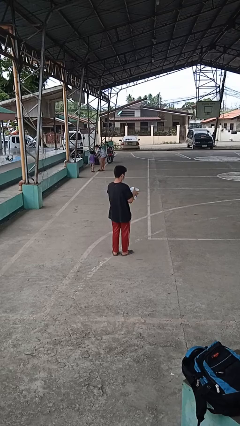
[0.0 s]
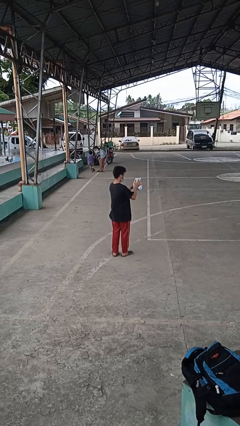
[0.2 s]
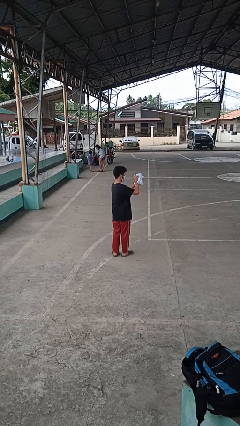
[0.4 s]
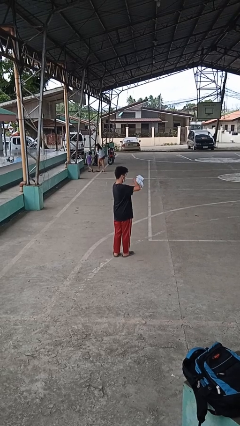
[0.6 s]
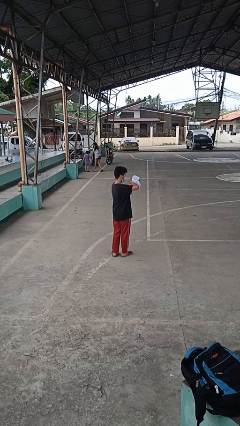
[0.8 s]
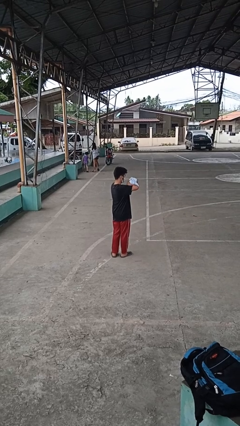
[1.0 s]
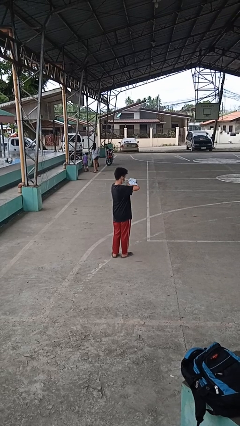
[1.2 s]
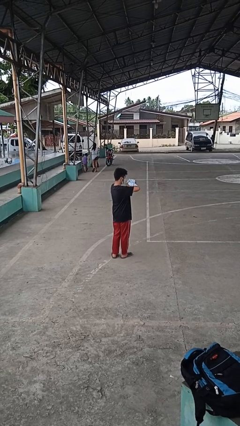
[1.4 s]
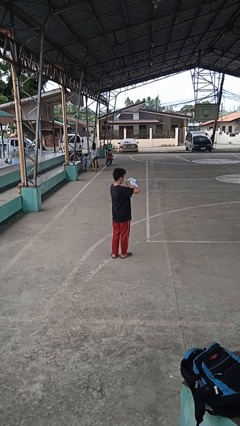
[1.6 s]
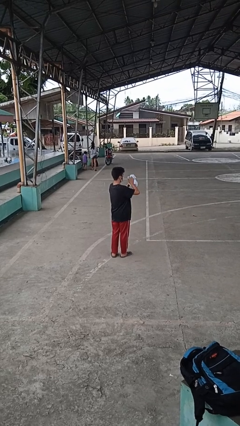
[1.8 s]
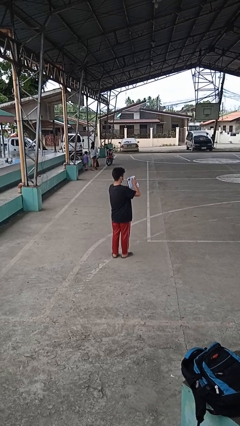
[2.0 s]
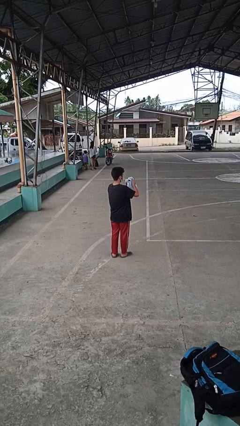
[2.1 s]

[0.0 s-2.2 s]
person squeezes object

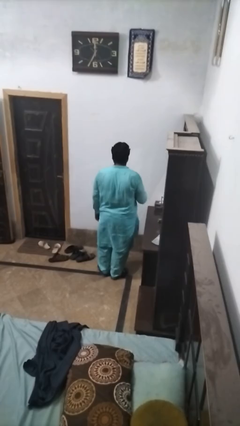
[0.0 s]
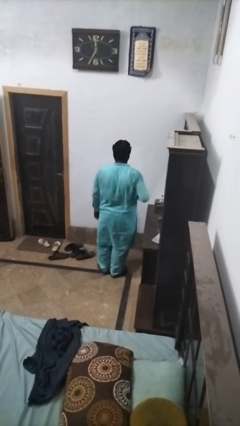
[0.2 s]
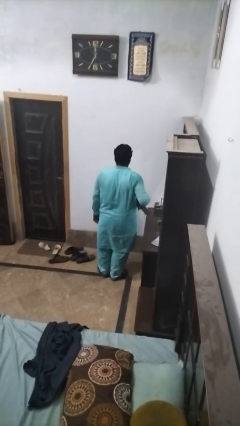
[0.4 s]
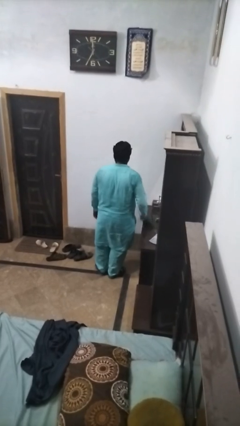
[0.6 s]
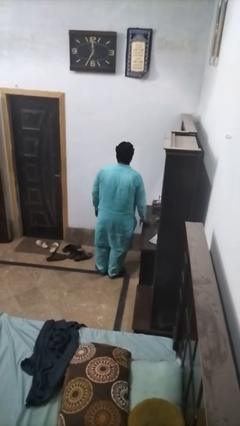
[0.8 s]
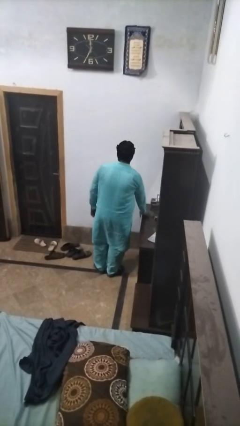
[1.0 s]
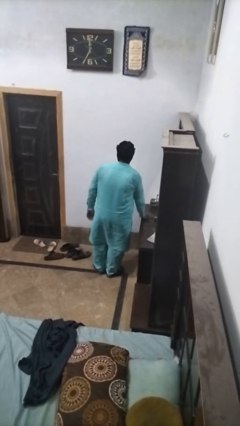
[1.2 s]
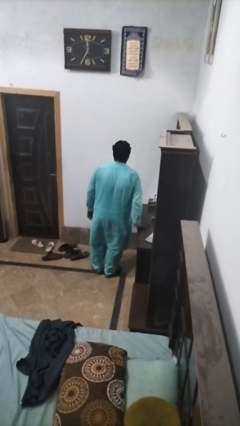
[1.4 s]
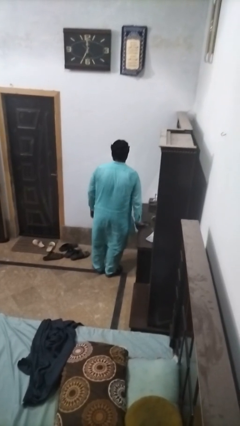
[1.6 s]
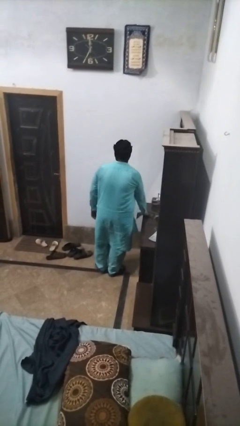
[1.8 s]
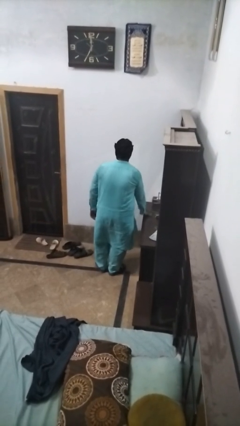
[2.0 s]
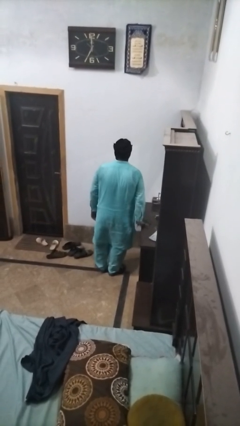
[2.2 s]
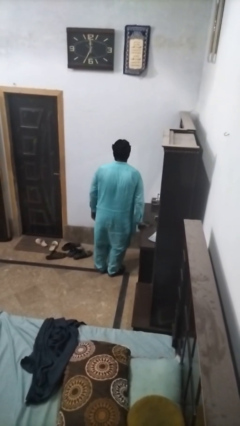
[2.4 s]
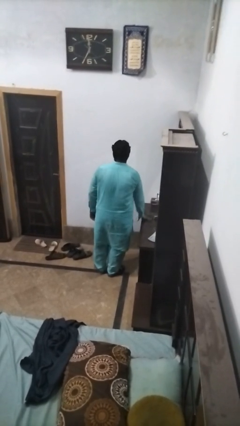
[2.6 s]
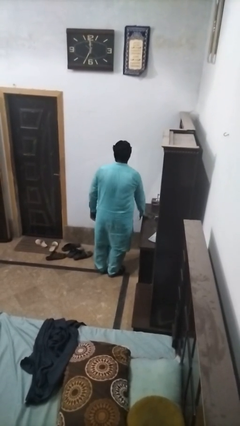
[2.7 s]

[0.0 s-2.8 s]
person cleans table with rag

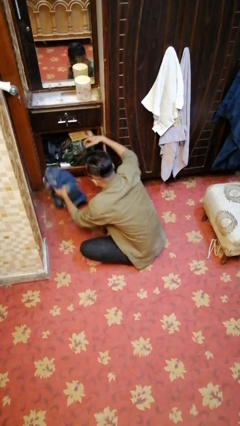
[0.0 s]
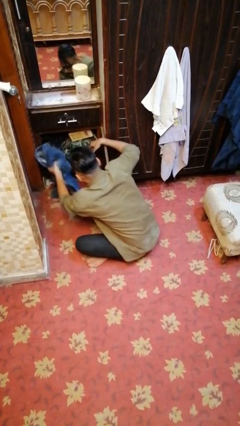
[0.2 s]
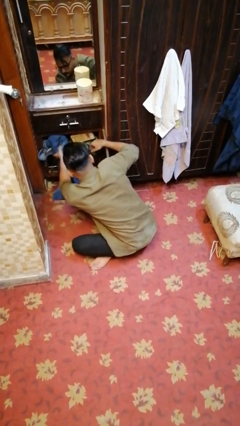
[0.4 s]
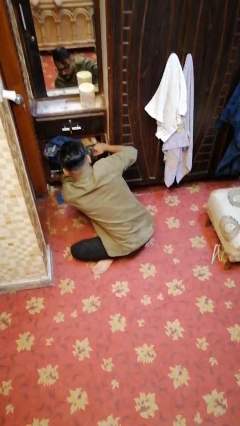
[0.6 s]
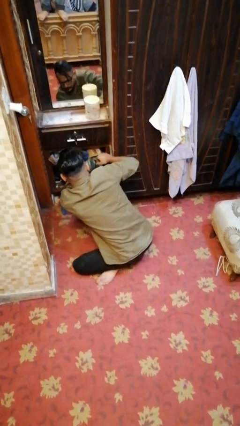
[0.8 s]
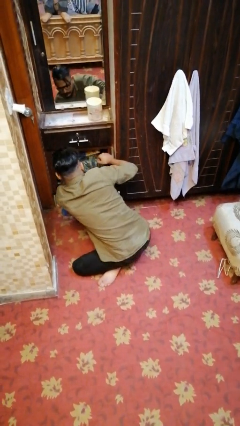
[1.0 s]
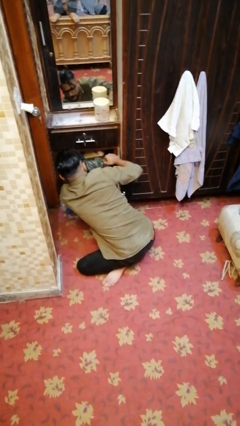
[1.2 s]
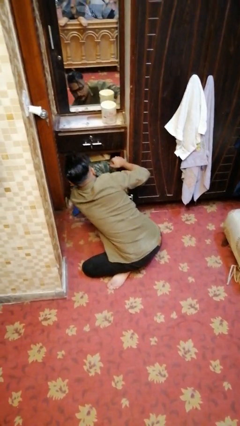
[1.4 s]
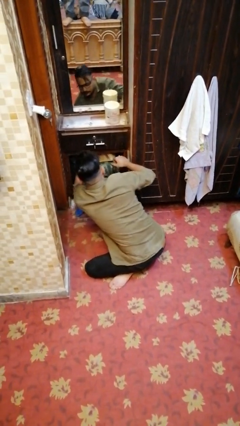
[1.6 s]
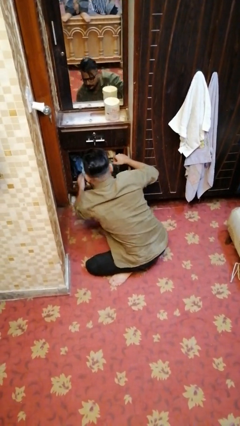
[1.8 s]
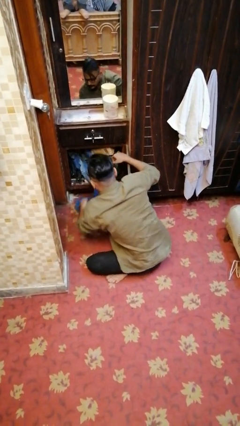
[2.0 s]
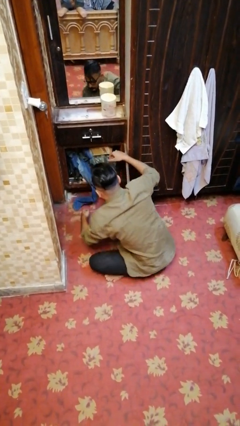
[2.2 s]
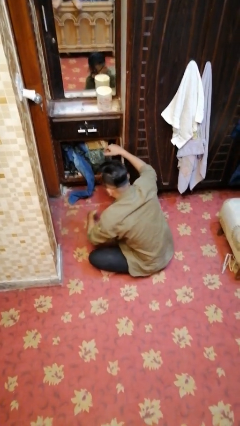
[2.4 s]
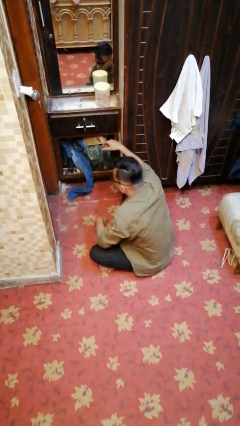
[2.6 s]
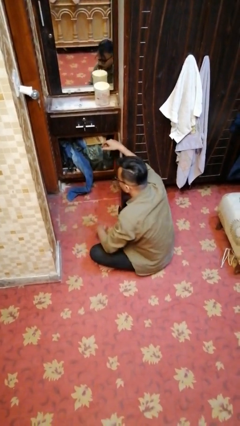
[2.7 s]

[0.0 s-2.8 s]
person puts clothes into dresser

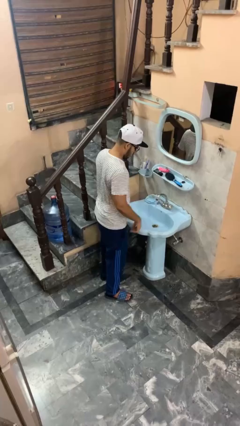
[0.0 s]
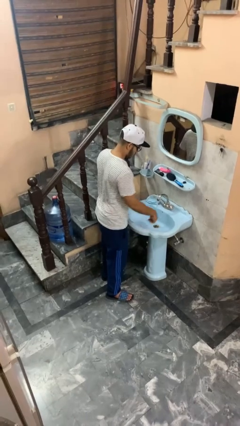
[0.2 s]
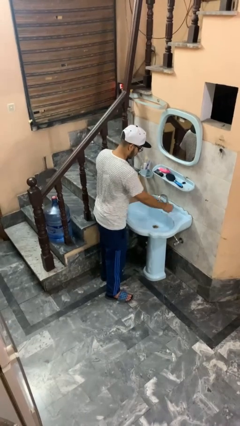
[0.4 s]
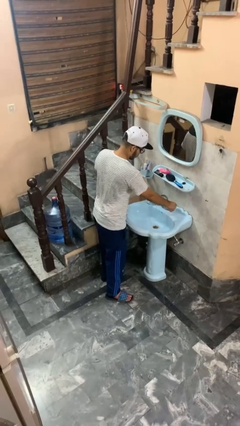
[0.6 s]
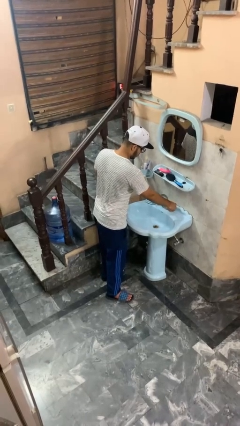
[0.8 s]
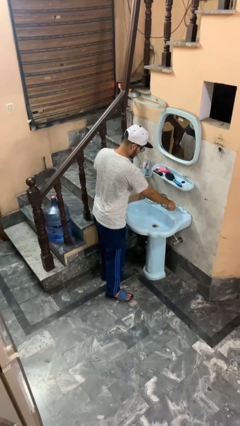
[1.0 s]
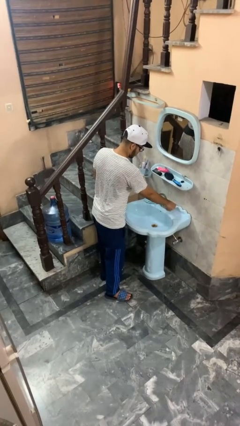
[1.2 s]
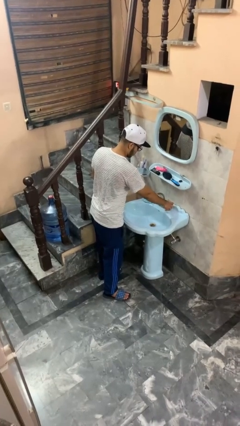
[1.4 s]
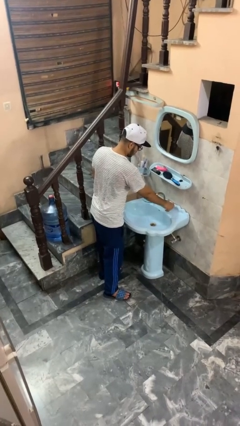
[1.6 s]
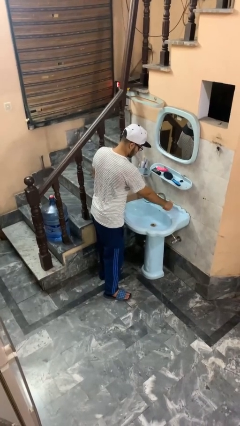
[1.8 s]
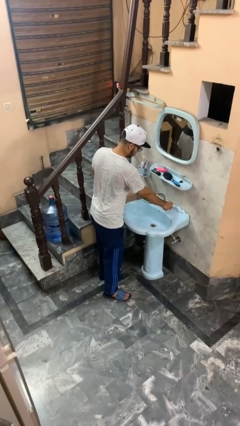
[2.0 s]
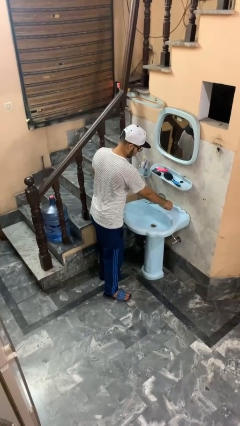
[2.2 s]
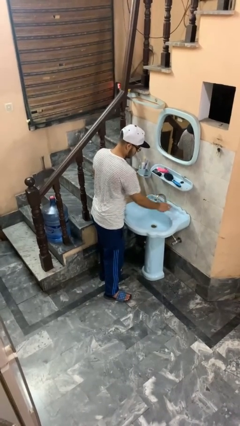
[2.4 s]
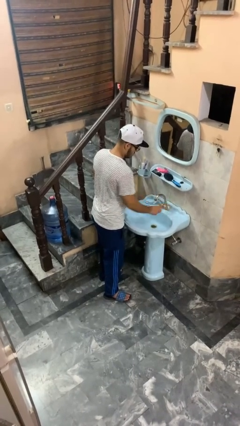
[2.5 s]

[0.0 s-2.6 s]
person turns off faucet

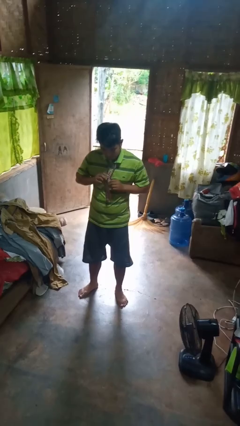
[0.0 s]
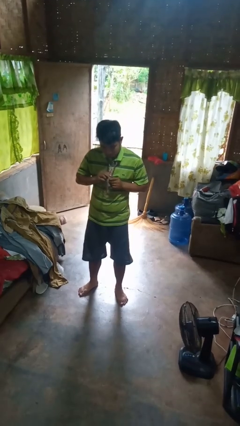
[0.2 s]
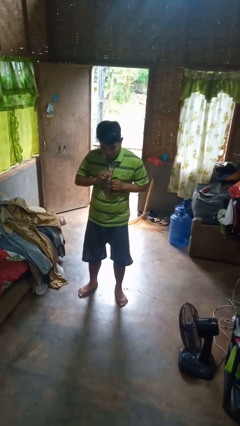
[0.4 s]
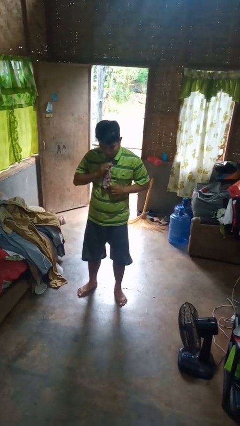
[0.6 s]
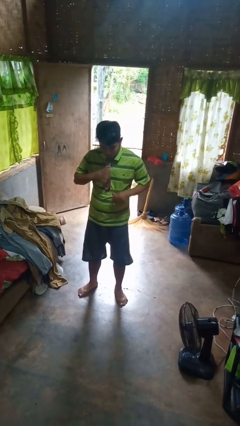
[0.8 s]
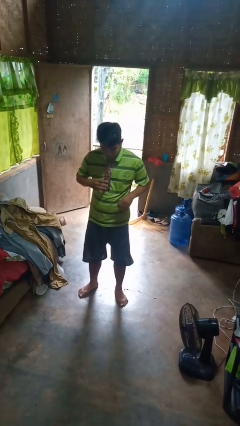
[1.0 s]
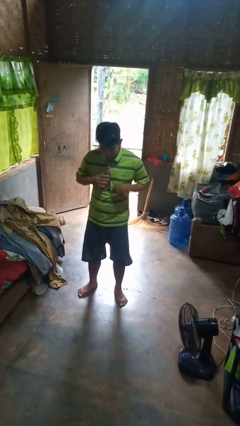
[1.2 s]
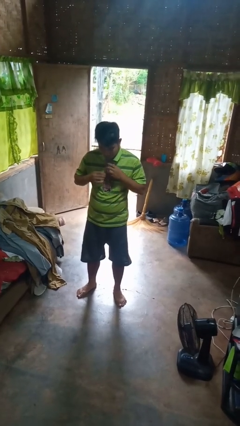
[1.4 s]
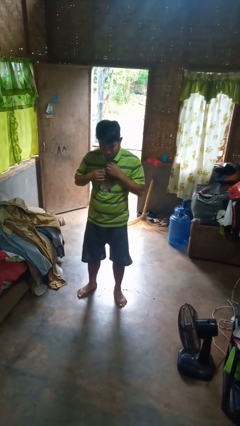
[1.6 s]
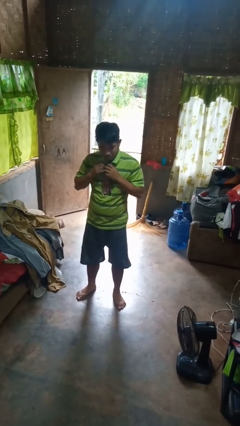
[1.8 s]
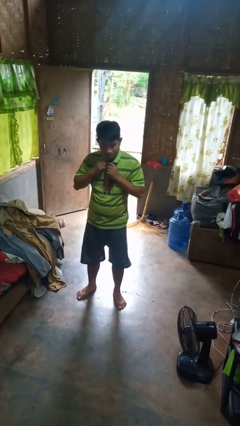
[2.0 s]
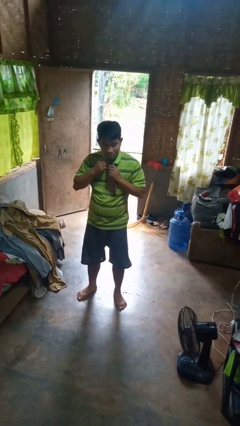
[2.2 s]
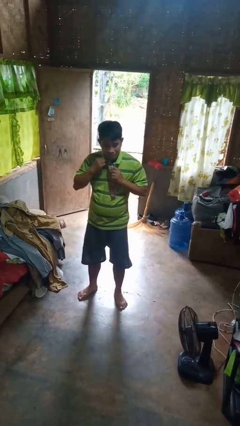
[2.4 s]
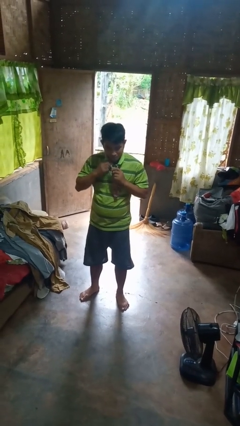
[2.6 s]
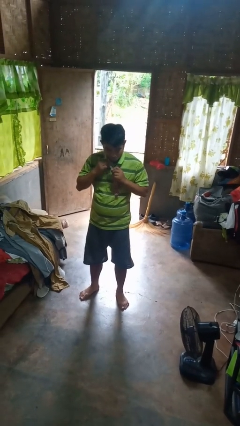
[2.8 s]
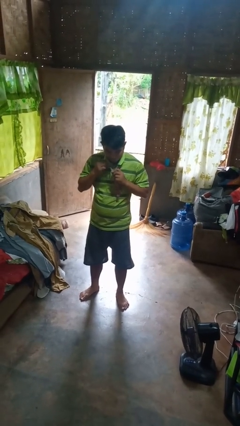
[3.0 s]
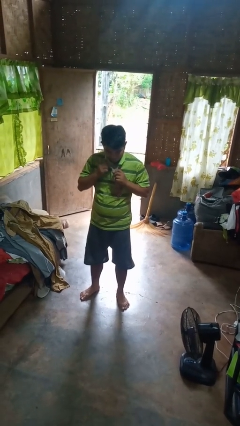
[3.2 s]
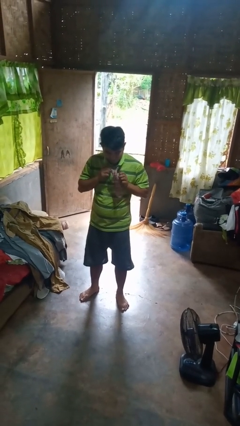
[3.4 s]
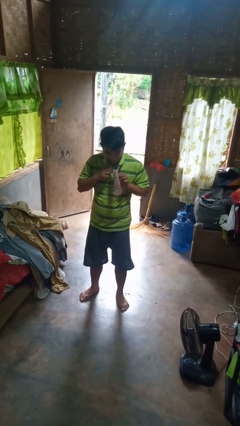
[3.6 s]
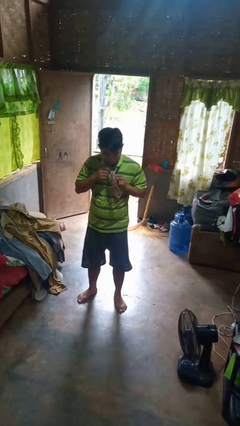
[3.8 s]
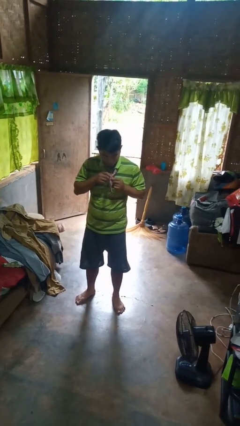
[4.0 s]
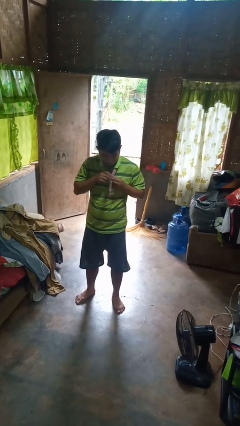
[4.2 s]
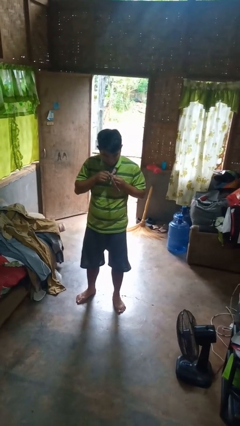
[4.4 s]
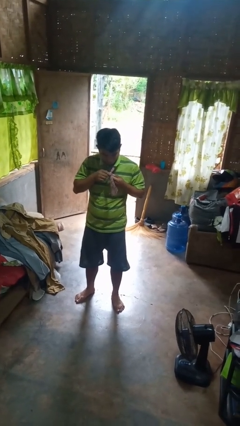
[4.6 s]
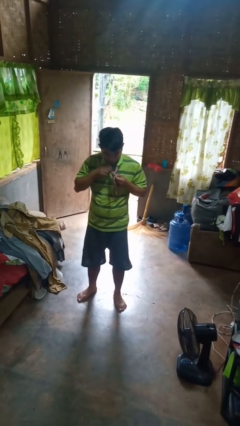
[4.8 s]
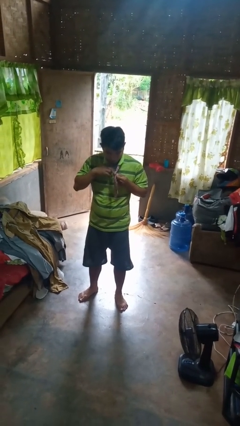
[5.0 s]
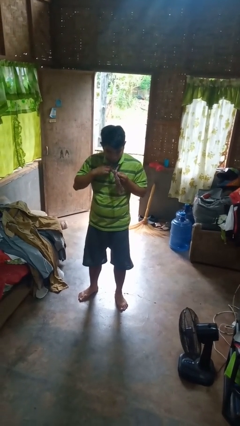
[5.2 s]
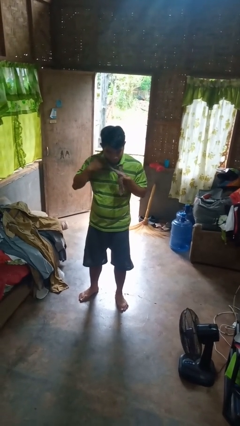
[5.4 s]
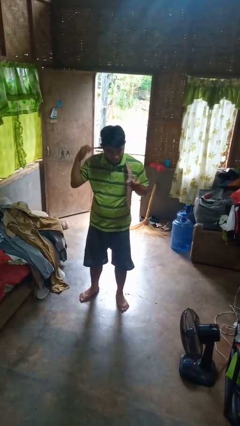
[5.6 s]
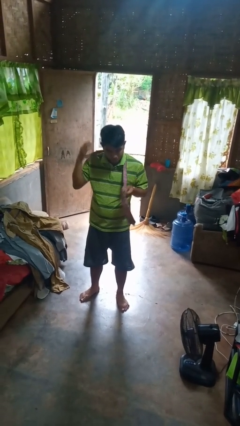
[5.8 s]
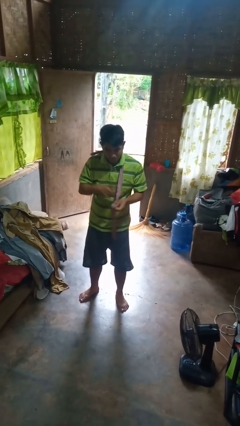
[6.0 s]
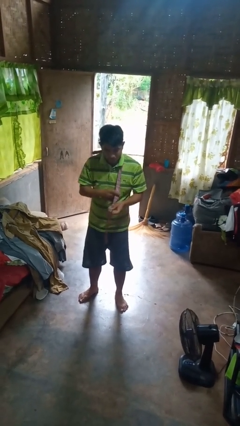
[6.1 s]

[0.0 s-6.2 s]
person takes off necktie

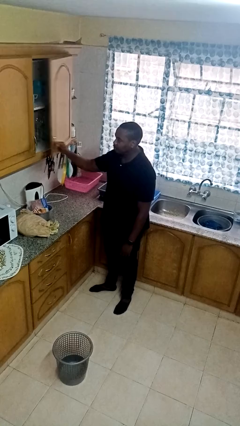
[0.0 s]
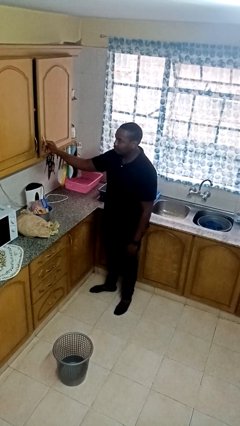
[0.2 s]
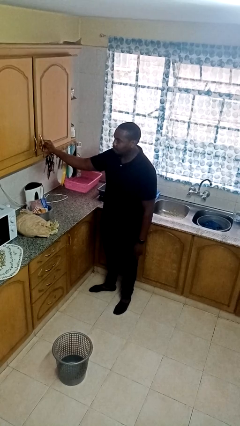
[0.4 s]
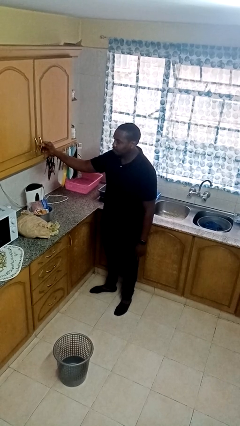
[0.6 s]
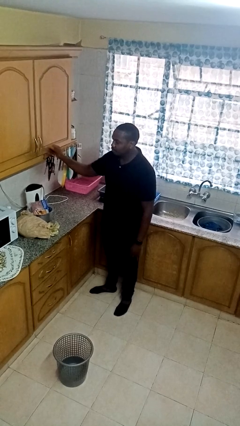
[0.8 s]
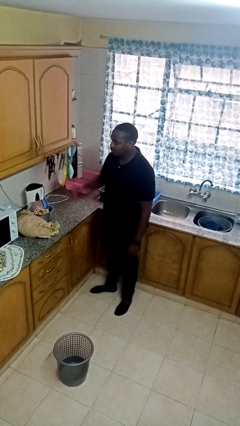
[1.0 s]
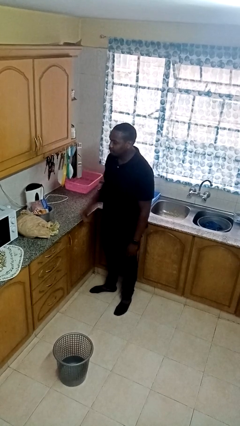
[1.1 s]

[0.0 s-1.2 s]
person closes cabinet
